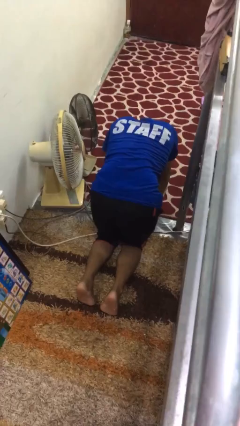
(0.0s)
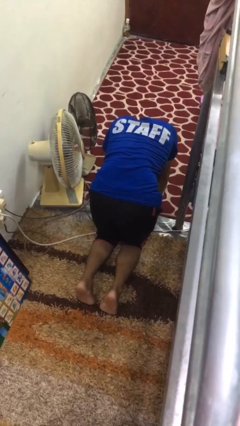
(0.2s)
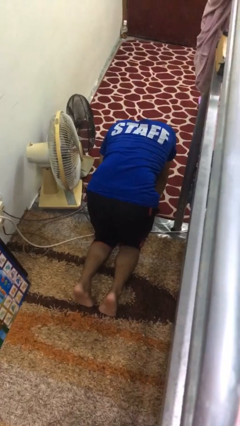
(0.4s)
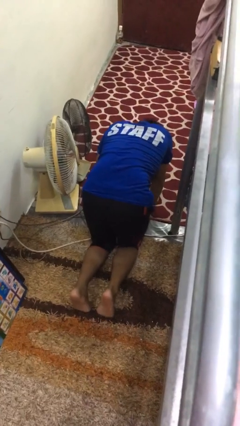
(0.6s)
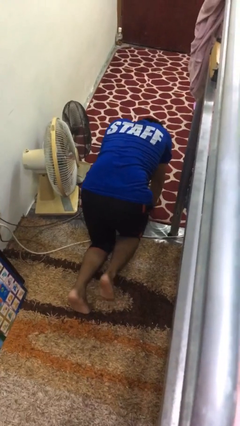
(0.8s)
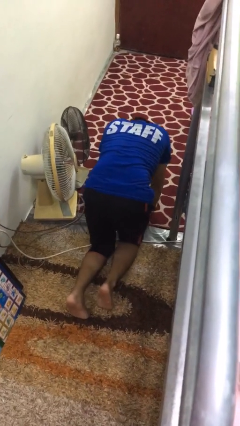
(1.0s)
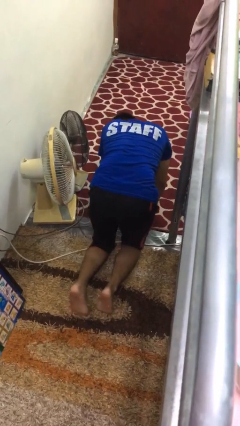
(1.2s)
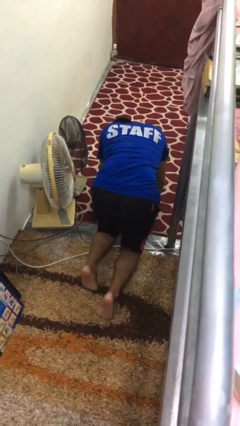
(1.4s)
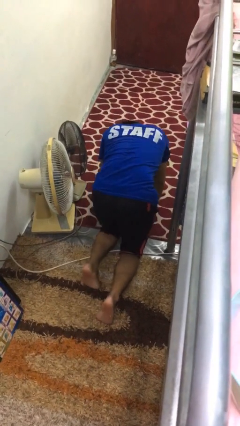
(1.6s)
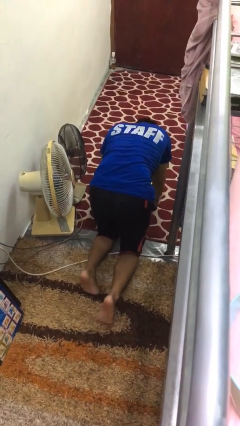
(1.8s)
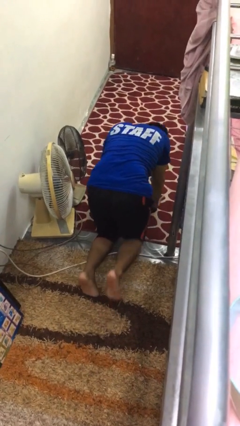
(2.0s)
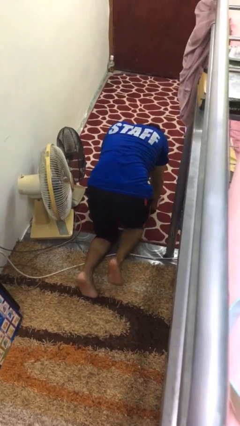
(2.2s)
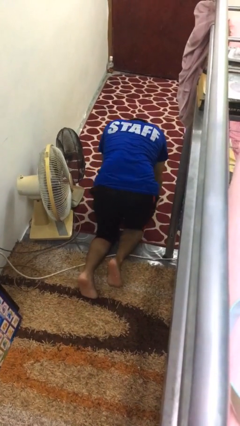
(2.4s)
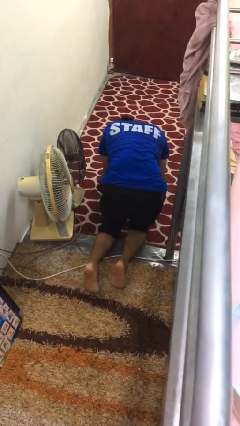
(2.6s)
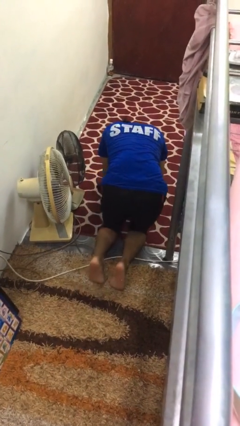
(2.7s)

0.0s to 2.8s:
person crawls

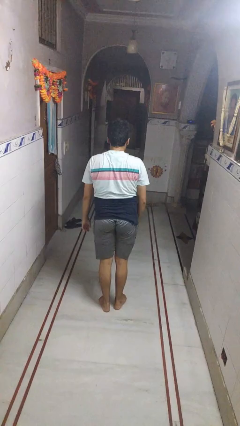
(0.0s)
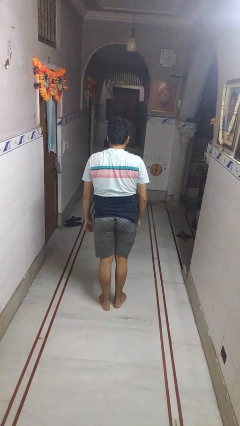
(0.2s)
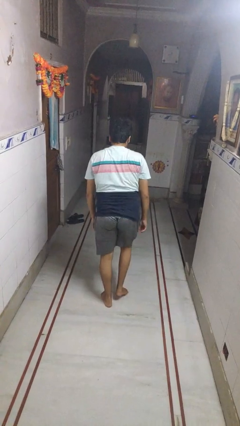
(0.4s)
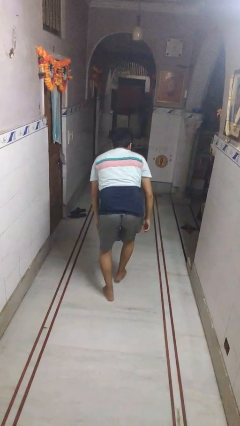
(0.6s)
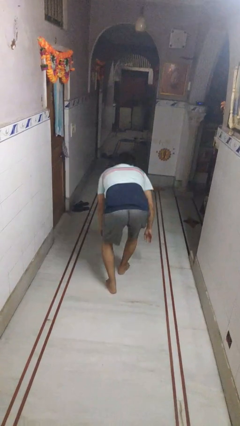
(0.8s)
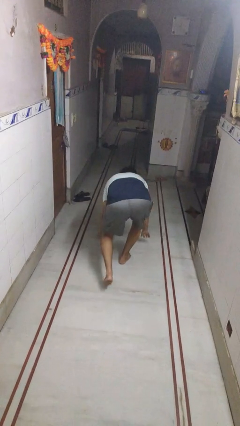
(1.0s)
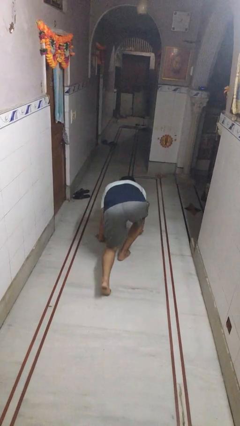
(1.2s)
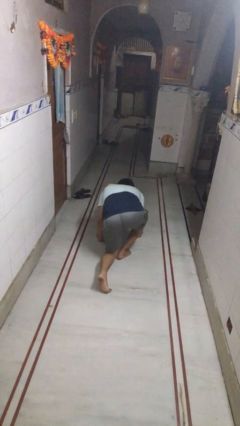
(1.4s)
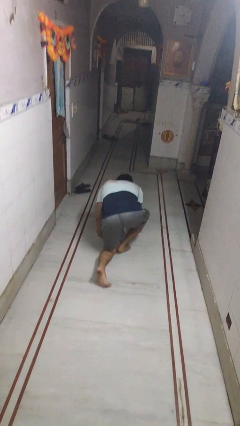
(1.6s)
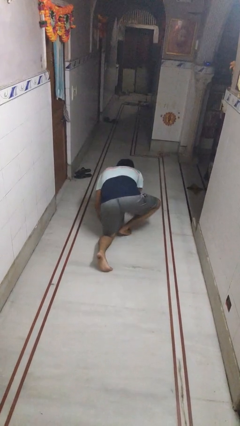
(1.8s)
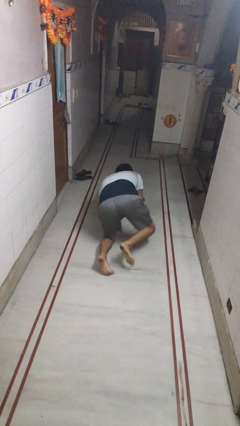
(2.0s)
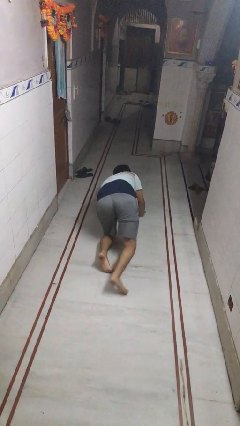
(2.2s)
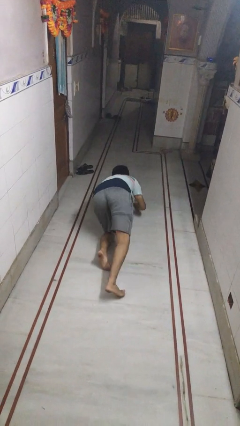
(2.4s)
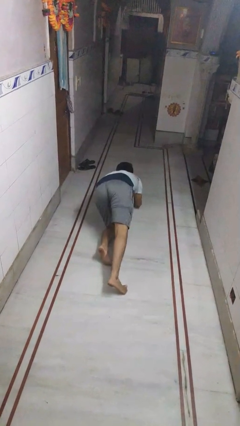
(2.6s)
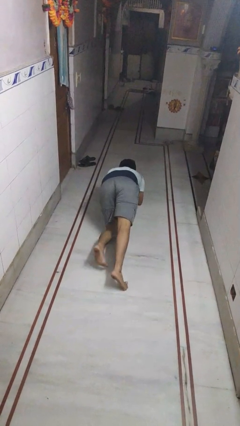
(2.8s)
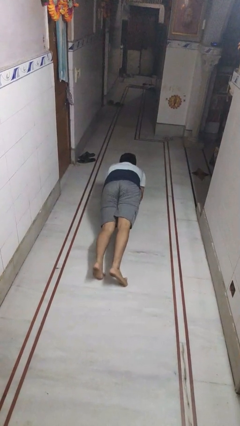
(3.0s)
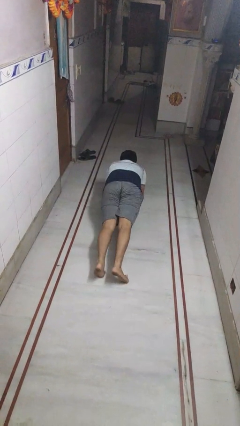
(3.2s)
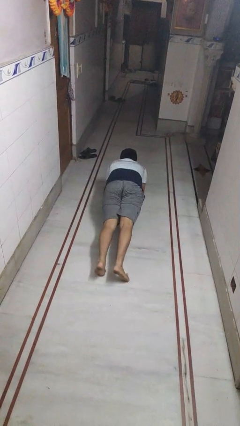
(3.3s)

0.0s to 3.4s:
person exercises with plank

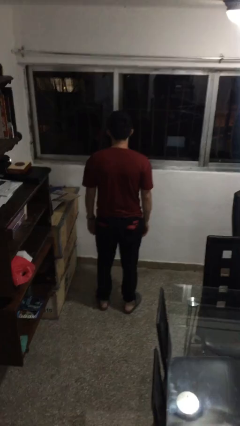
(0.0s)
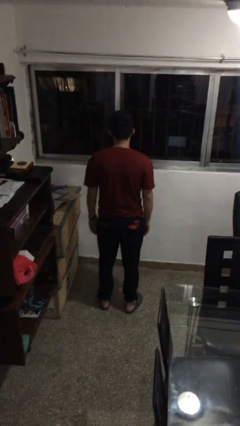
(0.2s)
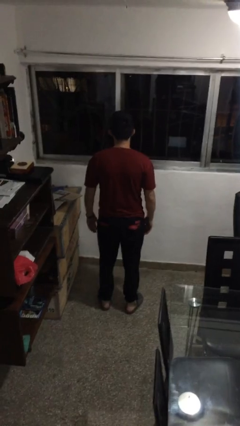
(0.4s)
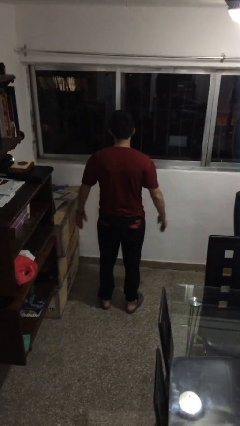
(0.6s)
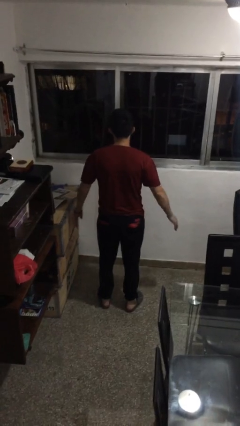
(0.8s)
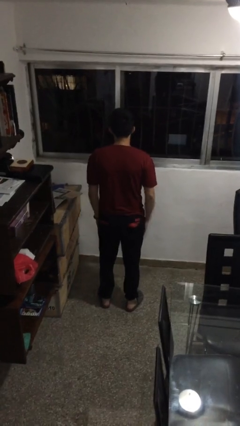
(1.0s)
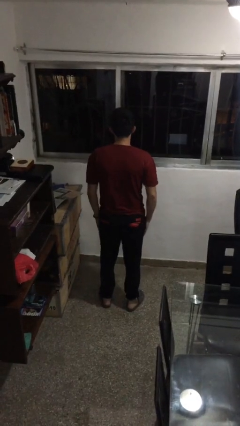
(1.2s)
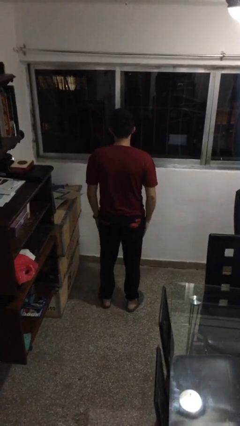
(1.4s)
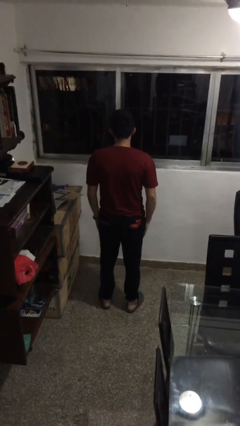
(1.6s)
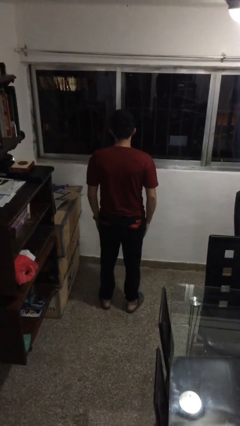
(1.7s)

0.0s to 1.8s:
person slaps hands on thighs

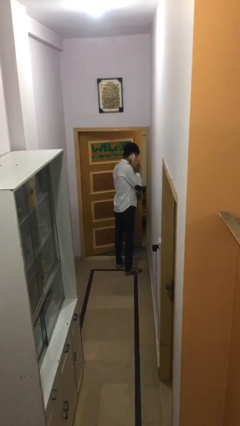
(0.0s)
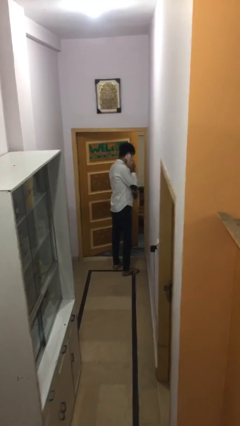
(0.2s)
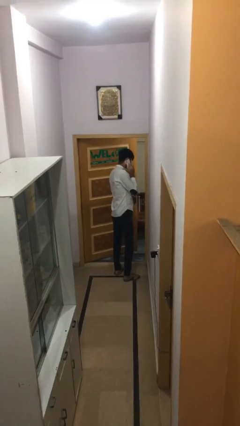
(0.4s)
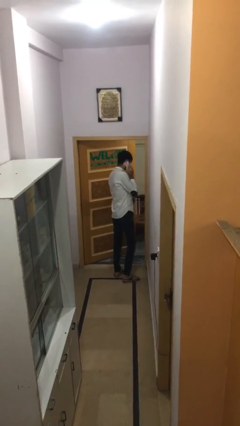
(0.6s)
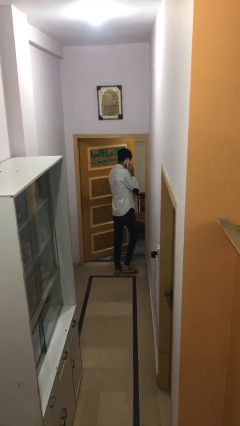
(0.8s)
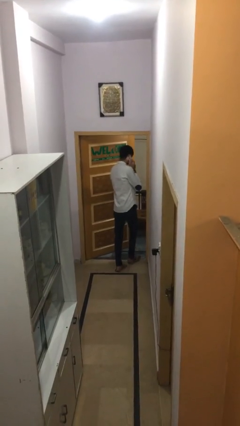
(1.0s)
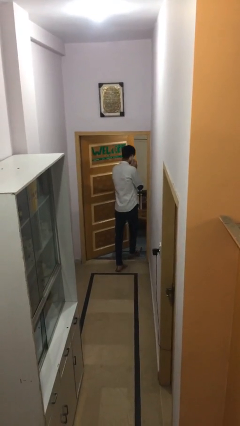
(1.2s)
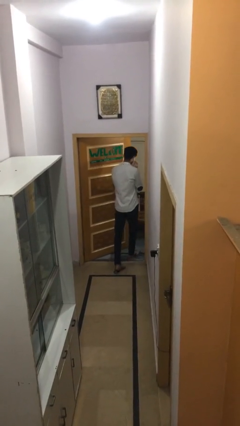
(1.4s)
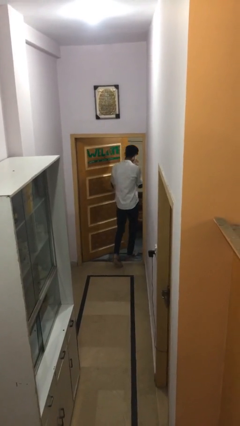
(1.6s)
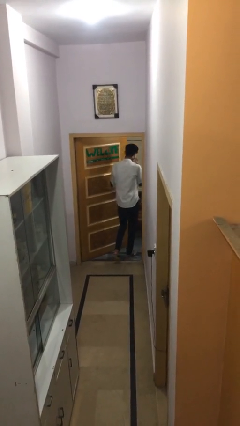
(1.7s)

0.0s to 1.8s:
person exits scene through structure

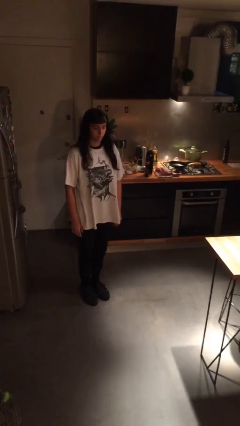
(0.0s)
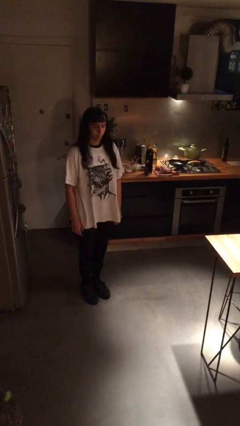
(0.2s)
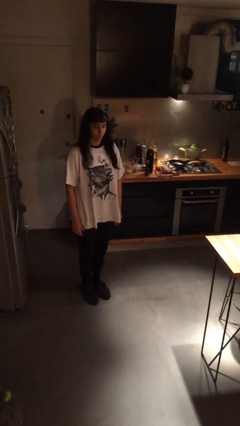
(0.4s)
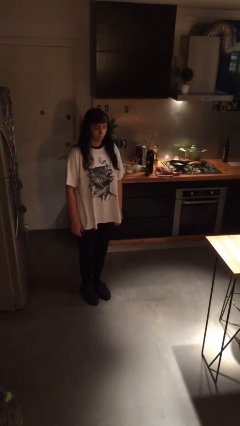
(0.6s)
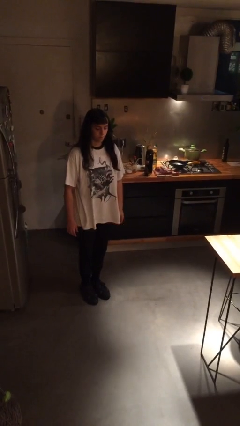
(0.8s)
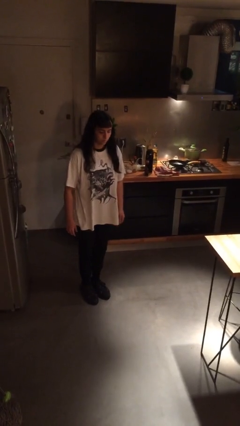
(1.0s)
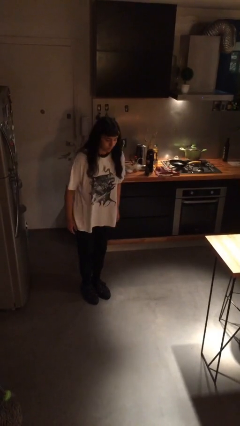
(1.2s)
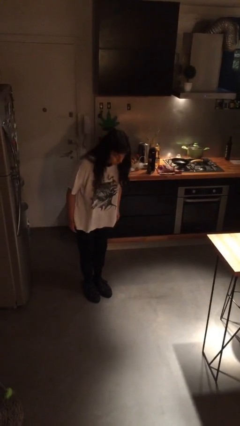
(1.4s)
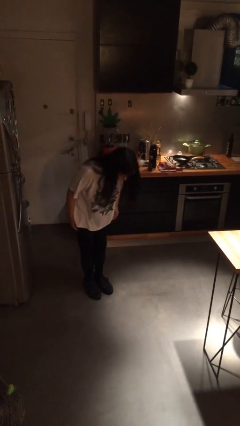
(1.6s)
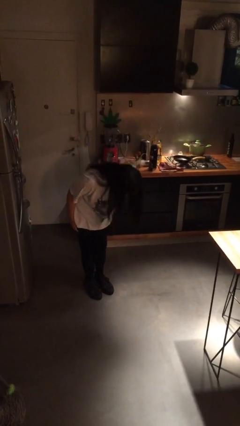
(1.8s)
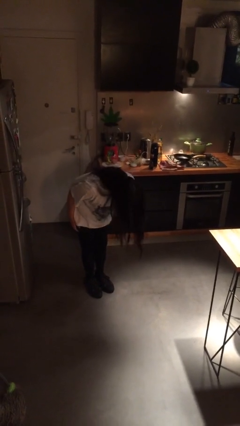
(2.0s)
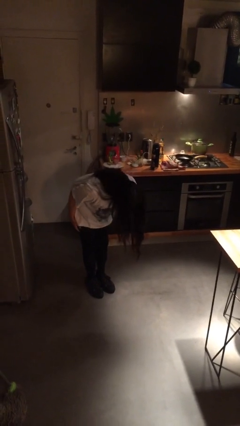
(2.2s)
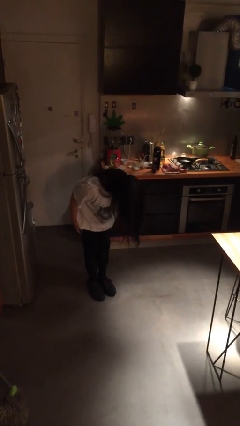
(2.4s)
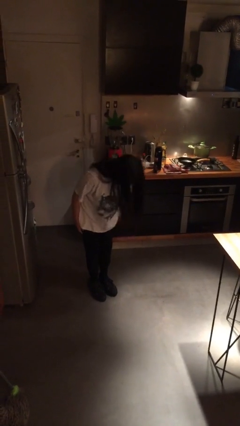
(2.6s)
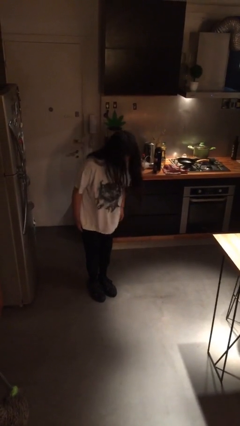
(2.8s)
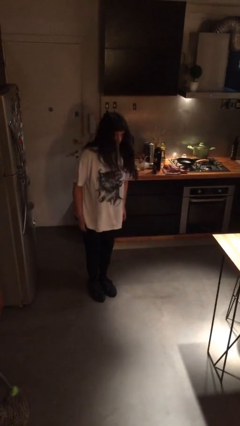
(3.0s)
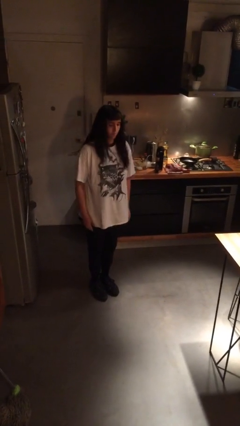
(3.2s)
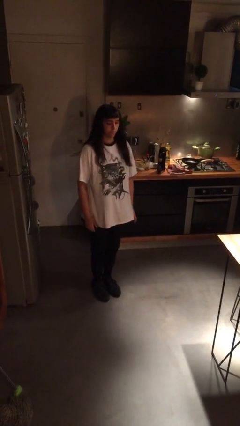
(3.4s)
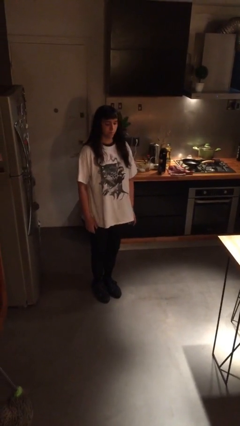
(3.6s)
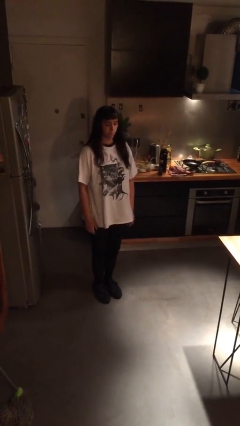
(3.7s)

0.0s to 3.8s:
person bows

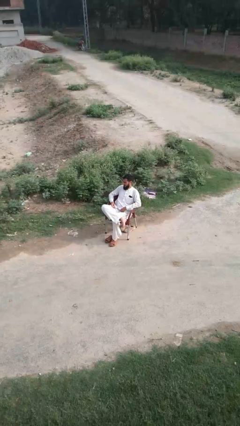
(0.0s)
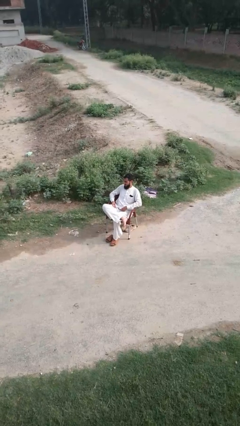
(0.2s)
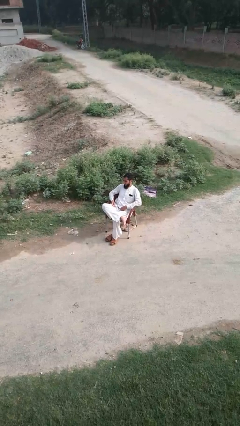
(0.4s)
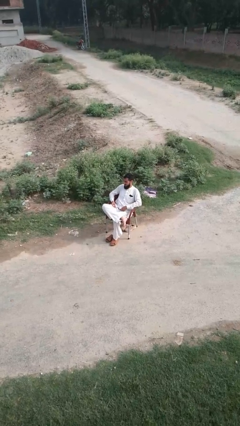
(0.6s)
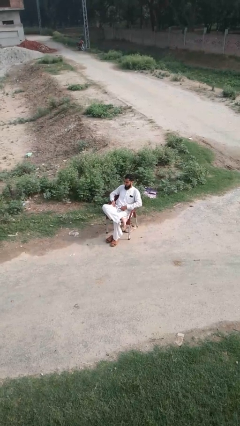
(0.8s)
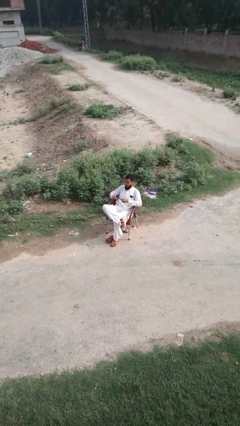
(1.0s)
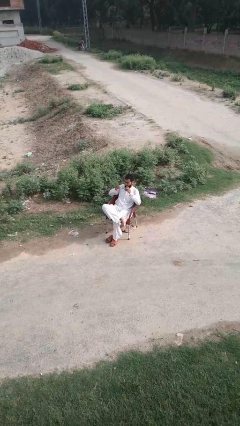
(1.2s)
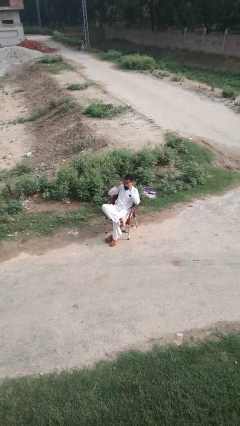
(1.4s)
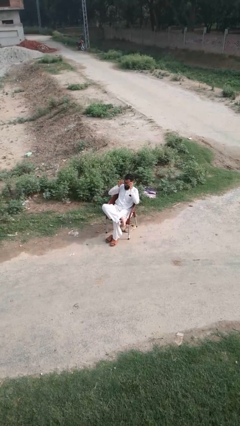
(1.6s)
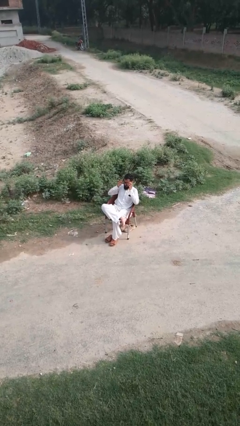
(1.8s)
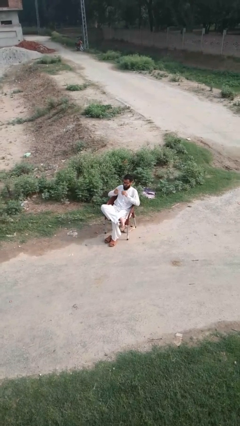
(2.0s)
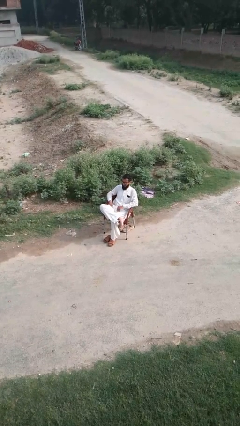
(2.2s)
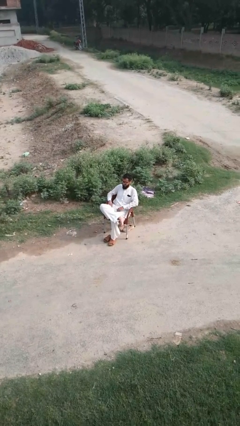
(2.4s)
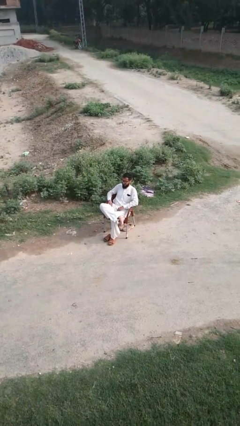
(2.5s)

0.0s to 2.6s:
person puts on glasses

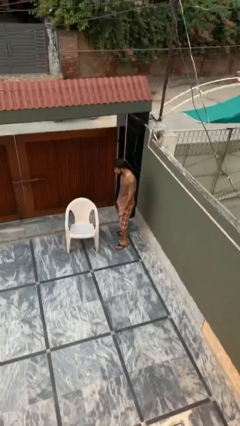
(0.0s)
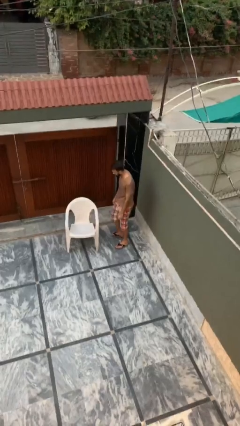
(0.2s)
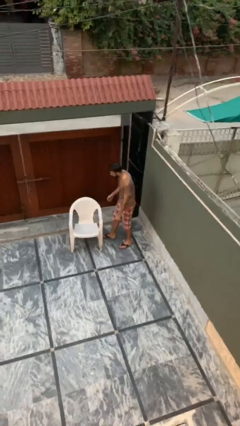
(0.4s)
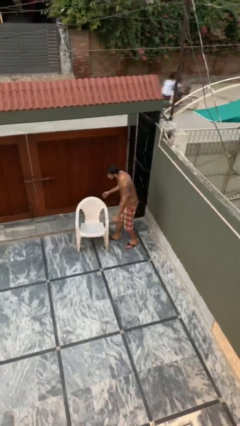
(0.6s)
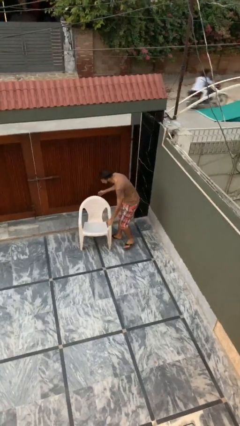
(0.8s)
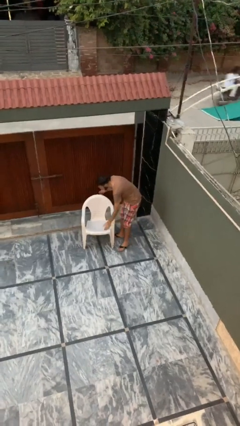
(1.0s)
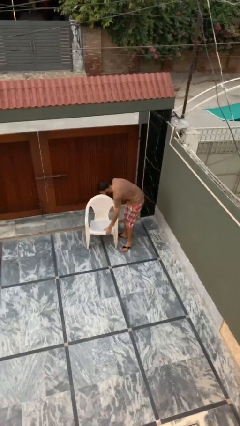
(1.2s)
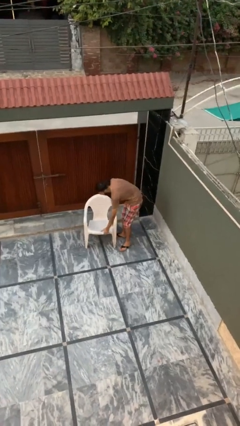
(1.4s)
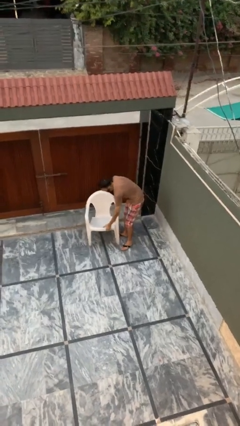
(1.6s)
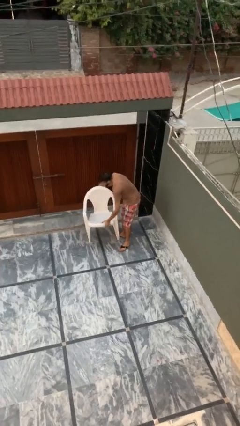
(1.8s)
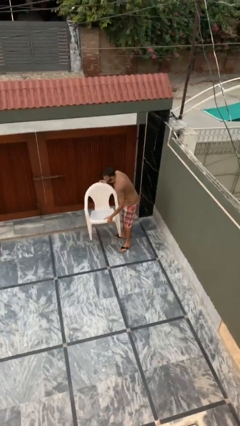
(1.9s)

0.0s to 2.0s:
person picks up object from floor
